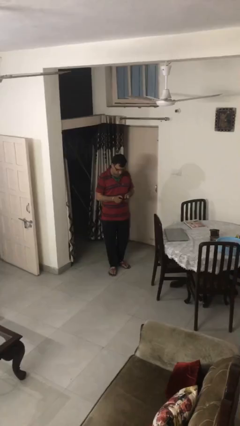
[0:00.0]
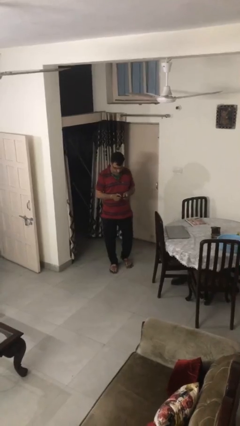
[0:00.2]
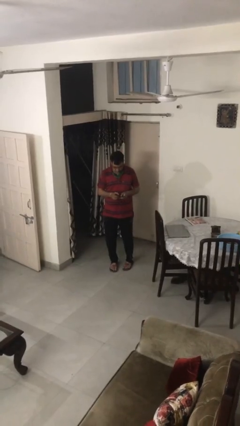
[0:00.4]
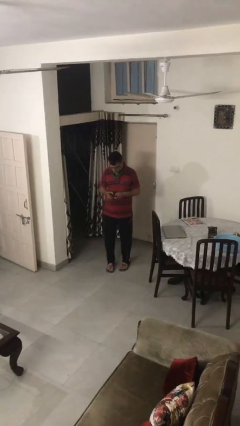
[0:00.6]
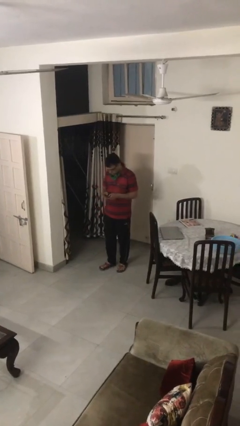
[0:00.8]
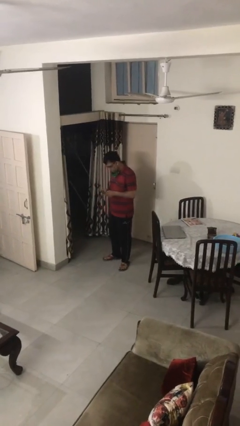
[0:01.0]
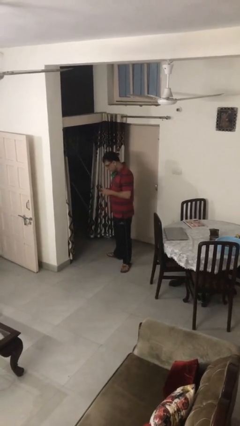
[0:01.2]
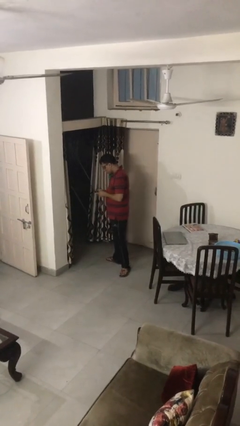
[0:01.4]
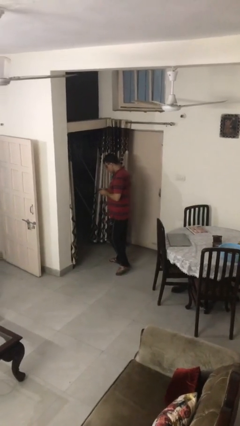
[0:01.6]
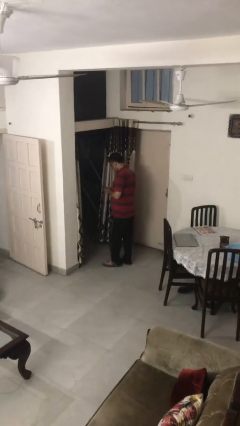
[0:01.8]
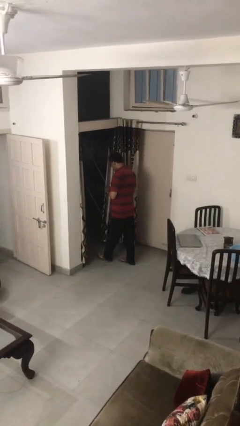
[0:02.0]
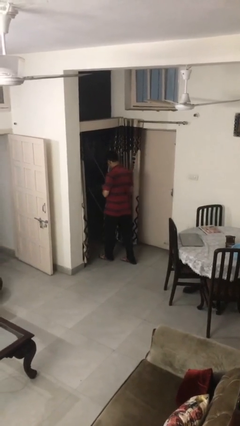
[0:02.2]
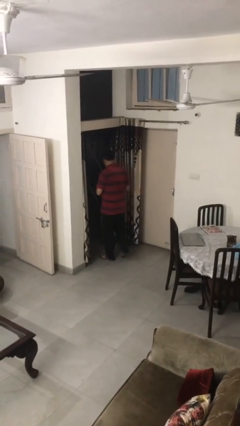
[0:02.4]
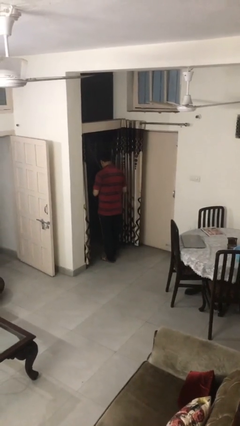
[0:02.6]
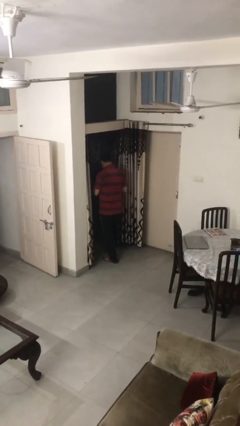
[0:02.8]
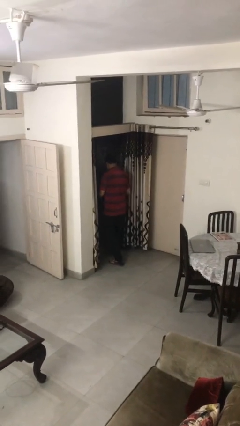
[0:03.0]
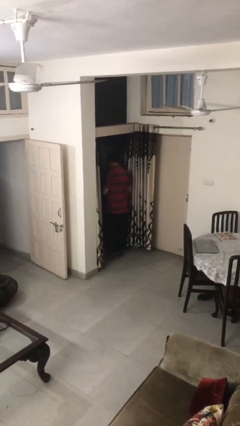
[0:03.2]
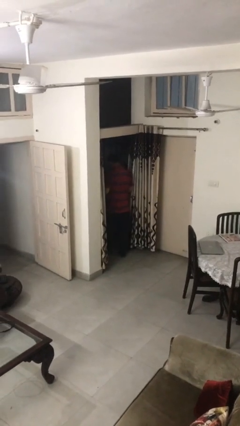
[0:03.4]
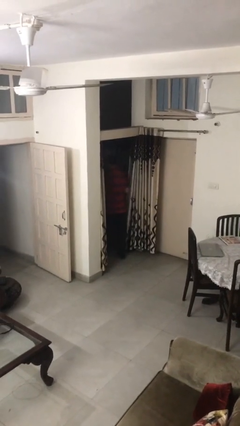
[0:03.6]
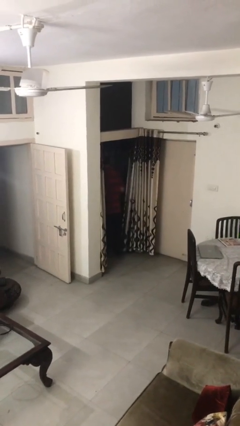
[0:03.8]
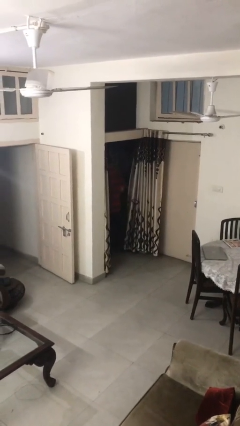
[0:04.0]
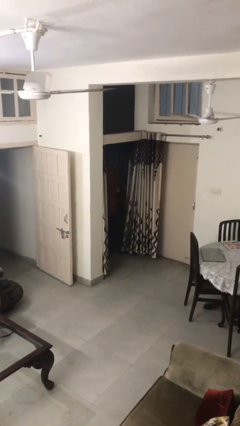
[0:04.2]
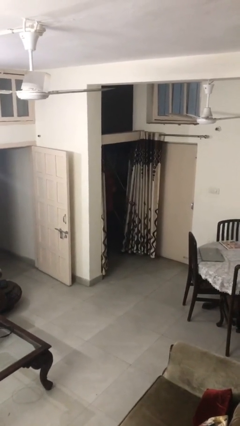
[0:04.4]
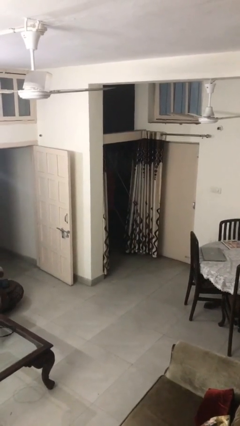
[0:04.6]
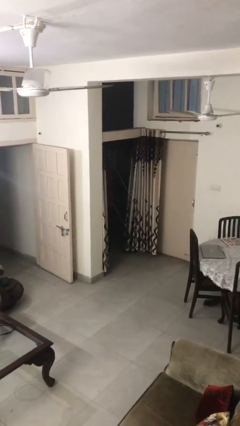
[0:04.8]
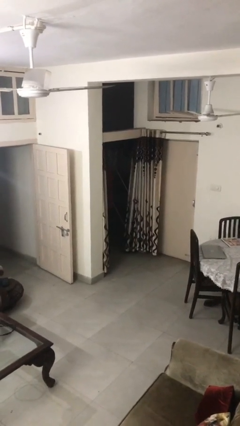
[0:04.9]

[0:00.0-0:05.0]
person exits scene through structure

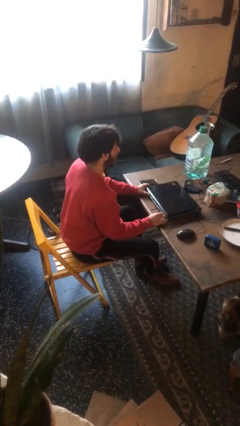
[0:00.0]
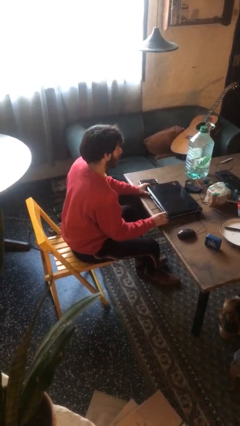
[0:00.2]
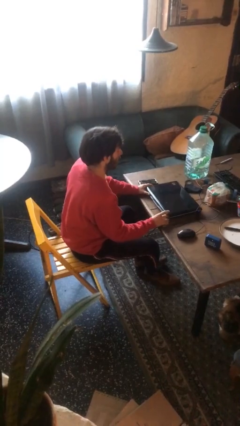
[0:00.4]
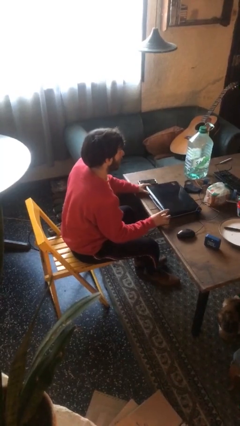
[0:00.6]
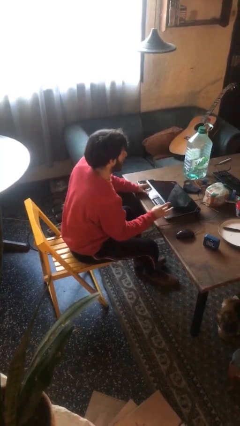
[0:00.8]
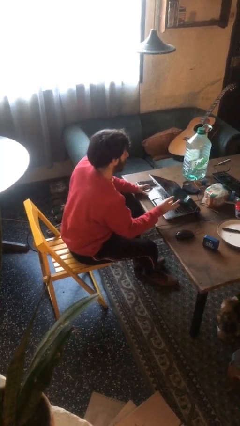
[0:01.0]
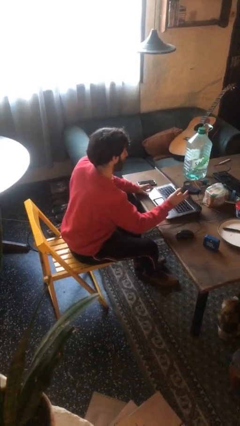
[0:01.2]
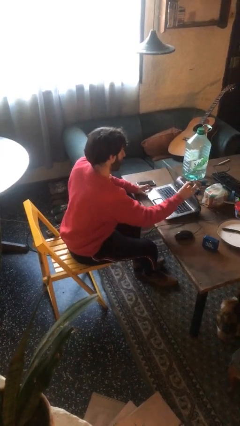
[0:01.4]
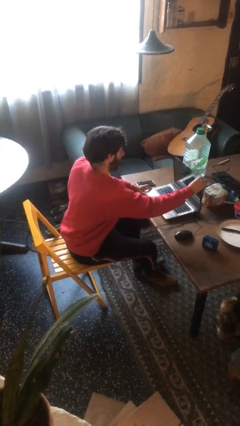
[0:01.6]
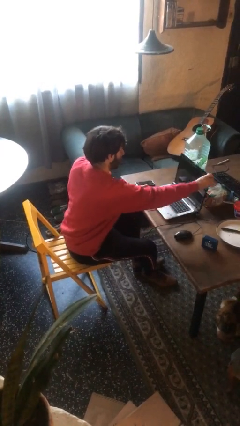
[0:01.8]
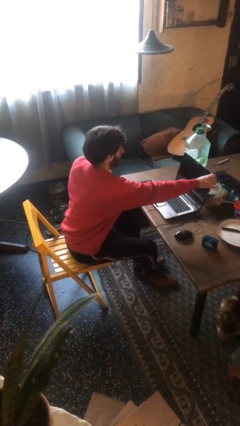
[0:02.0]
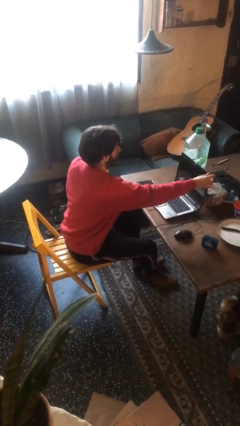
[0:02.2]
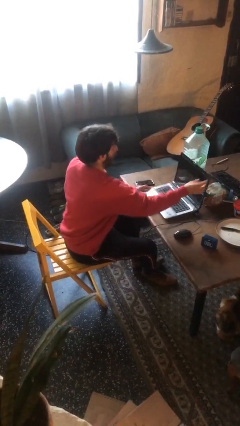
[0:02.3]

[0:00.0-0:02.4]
person opens laptop

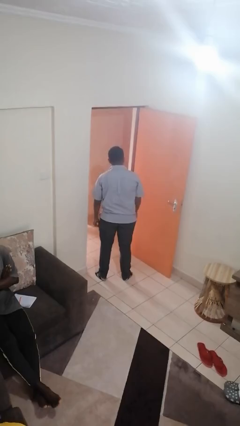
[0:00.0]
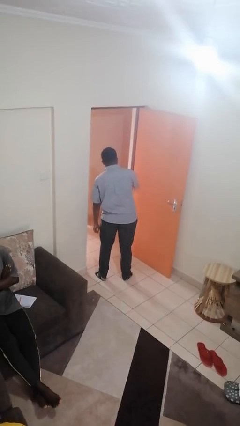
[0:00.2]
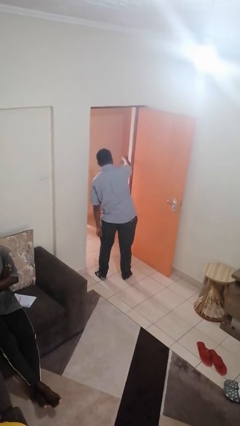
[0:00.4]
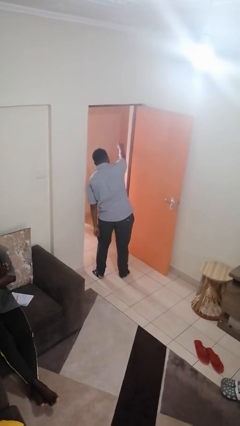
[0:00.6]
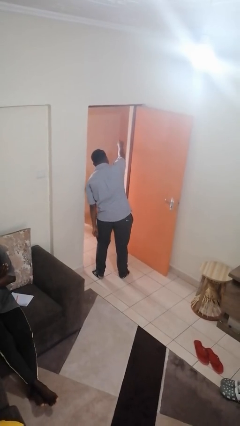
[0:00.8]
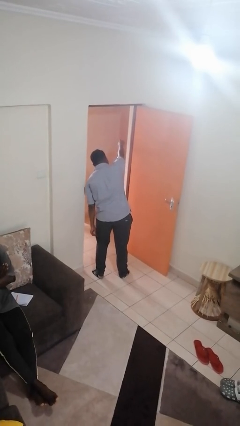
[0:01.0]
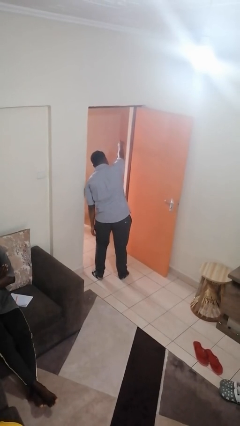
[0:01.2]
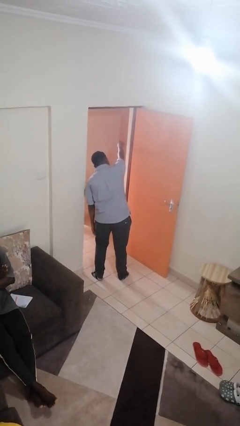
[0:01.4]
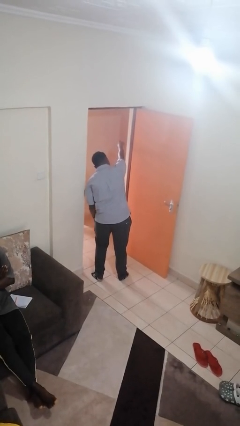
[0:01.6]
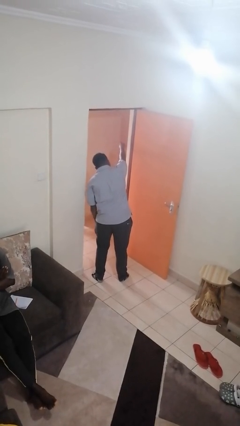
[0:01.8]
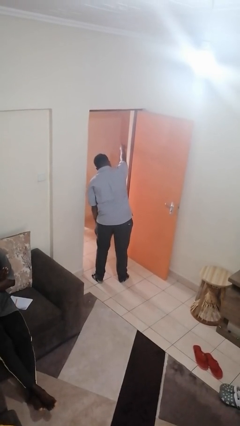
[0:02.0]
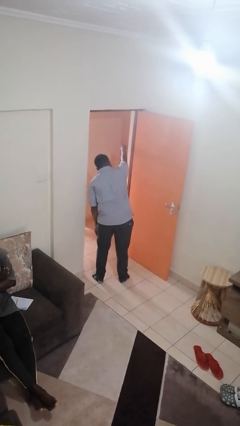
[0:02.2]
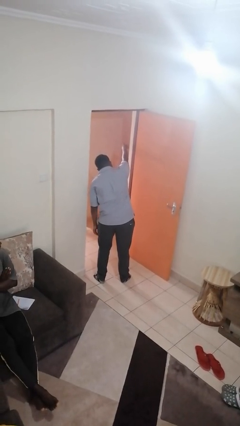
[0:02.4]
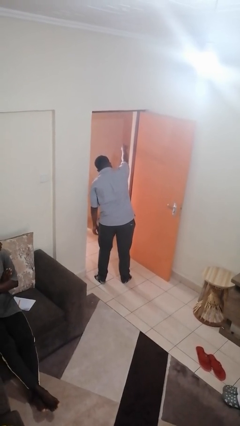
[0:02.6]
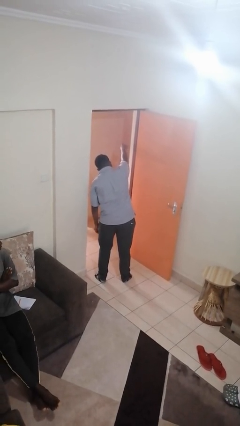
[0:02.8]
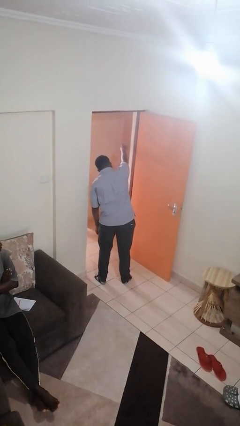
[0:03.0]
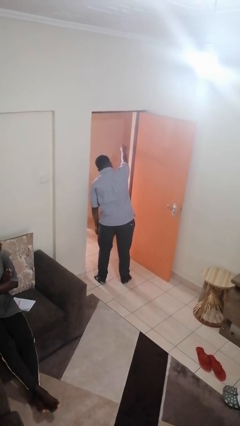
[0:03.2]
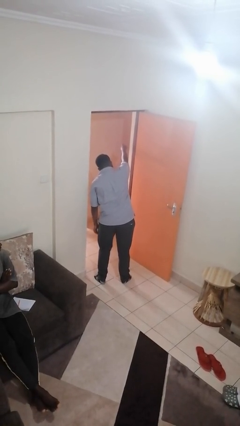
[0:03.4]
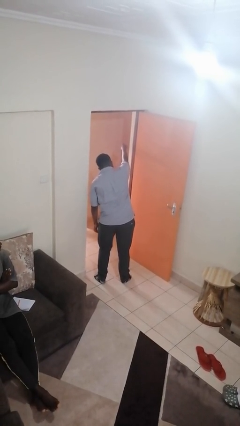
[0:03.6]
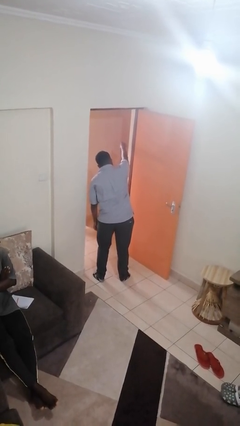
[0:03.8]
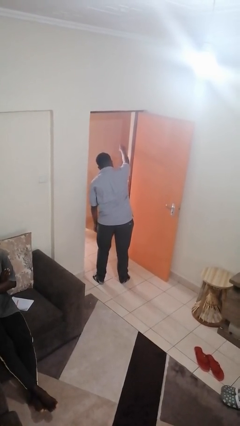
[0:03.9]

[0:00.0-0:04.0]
person points at person

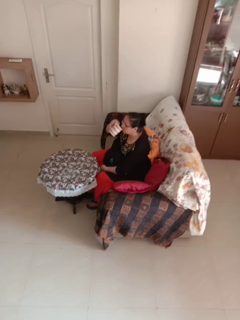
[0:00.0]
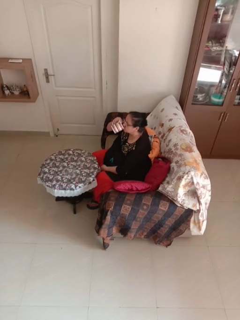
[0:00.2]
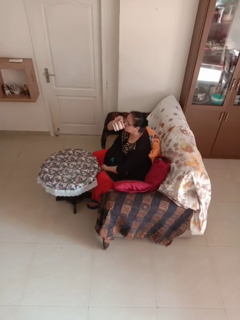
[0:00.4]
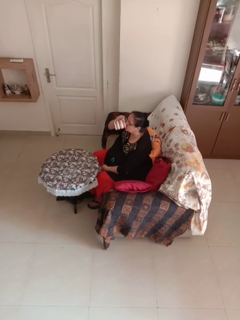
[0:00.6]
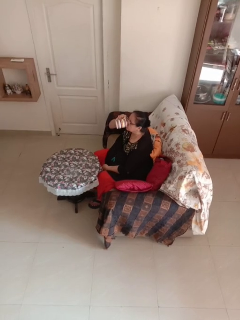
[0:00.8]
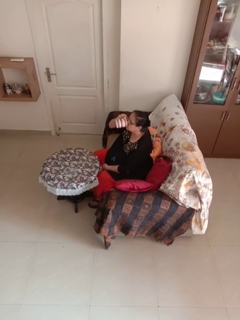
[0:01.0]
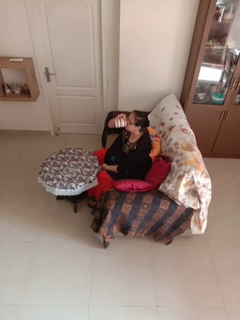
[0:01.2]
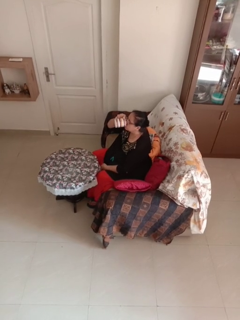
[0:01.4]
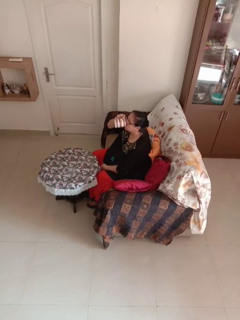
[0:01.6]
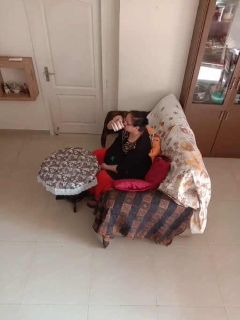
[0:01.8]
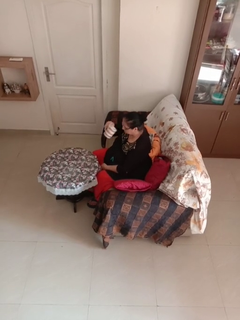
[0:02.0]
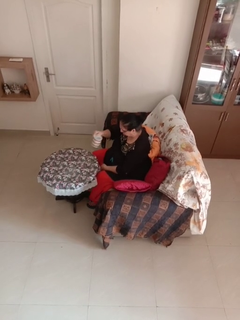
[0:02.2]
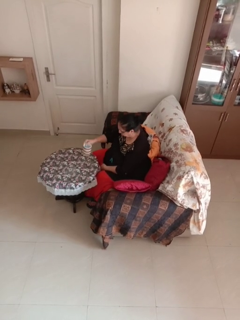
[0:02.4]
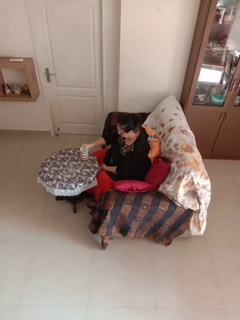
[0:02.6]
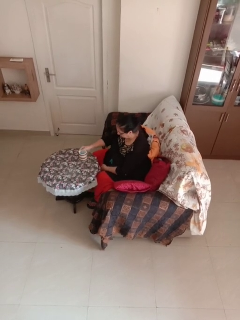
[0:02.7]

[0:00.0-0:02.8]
person drinks from mug

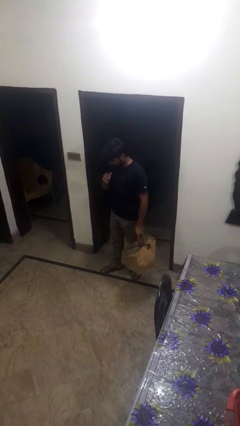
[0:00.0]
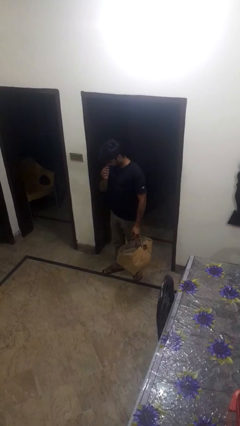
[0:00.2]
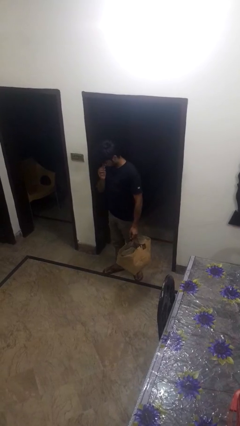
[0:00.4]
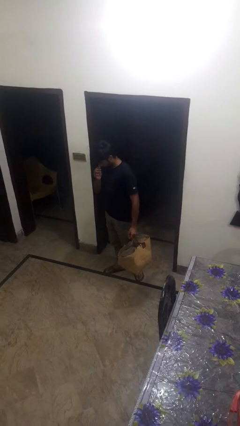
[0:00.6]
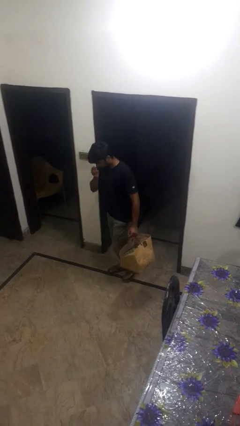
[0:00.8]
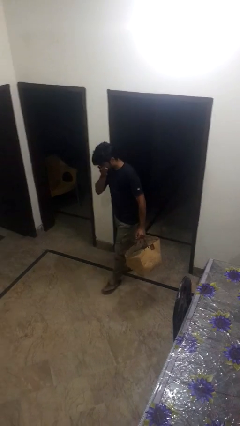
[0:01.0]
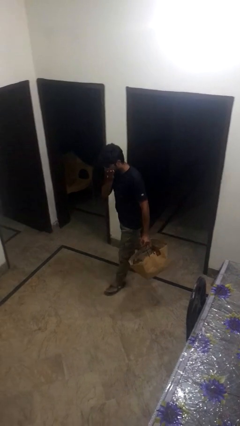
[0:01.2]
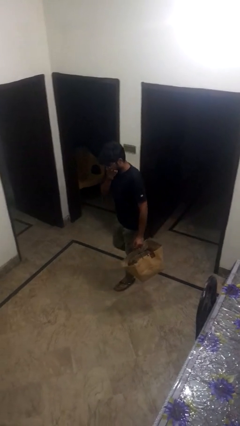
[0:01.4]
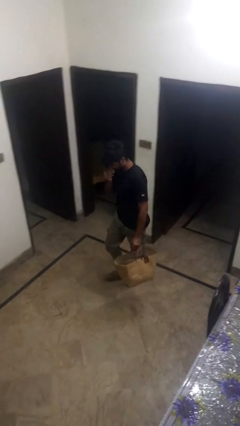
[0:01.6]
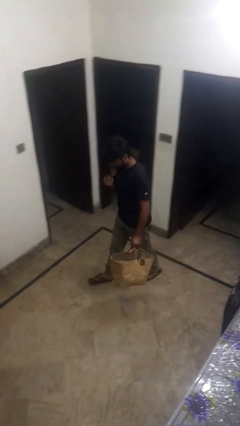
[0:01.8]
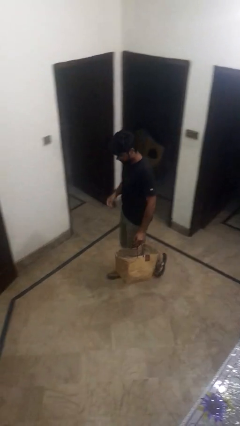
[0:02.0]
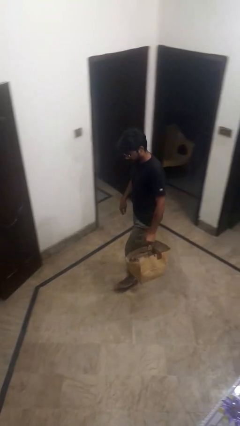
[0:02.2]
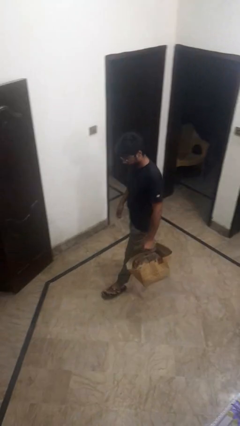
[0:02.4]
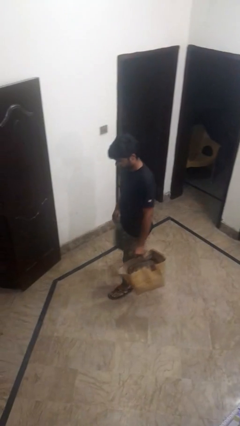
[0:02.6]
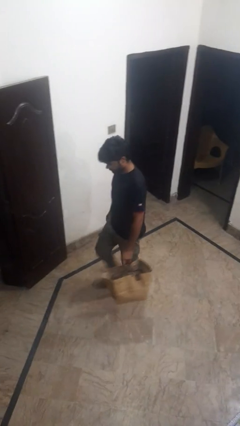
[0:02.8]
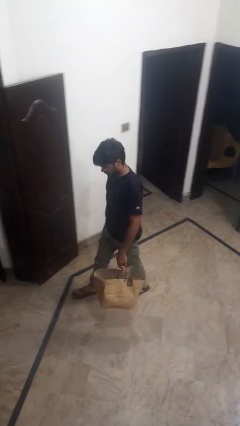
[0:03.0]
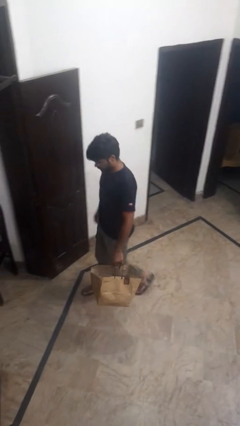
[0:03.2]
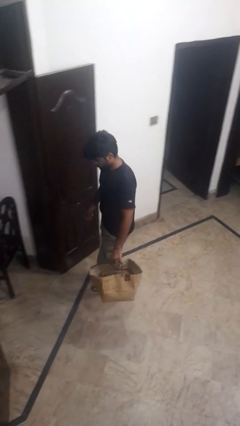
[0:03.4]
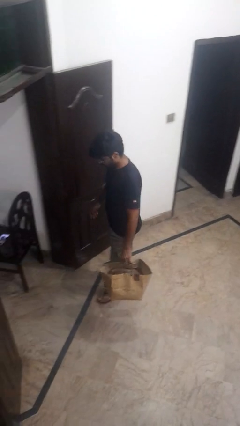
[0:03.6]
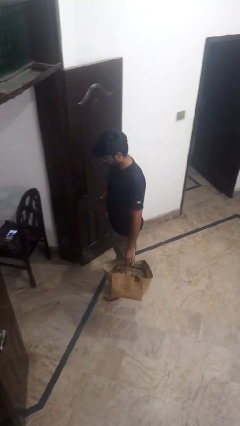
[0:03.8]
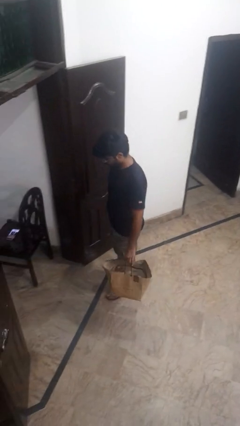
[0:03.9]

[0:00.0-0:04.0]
person carries groceries
